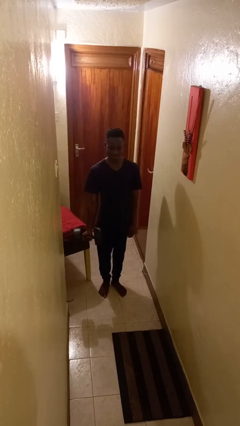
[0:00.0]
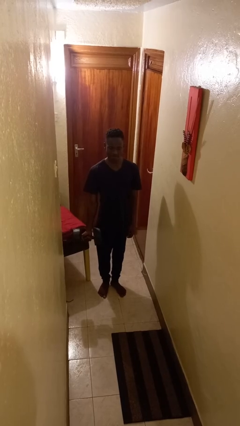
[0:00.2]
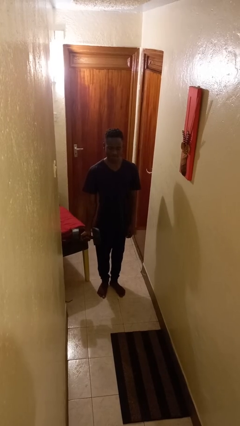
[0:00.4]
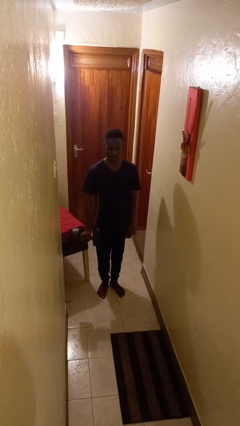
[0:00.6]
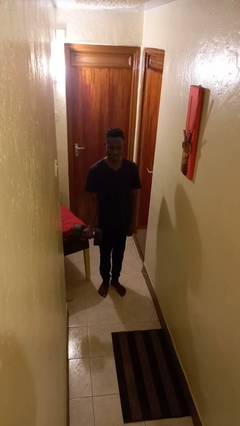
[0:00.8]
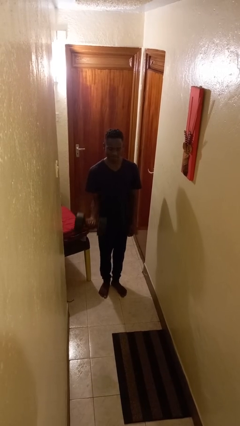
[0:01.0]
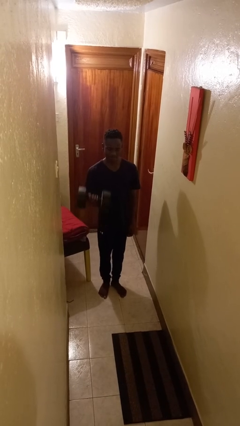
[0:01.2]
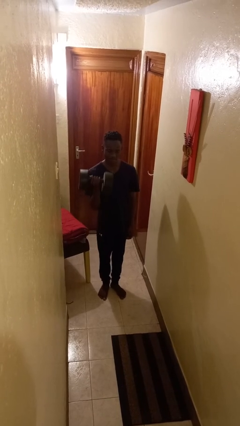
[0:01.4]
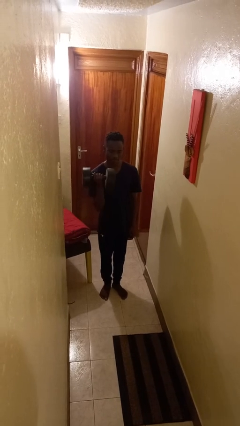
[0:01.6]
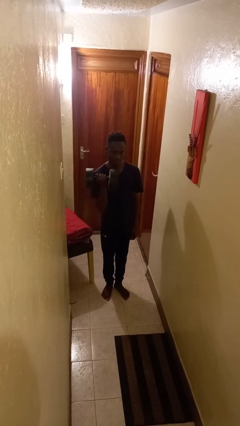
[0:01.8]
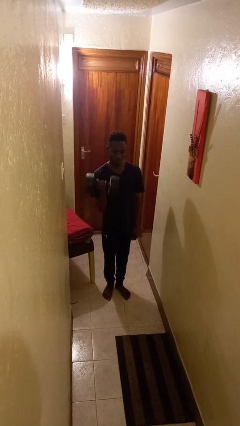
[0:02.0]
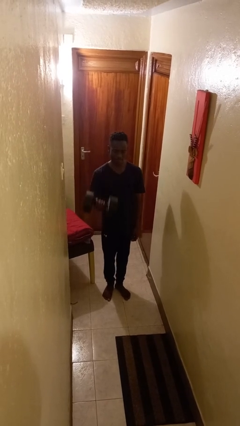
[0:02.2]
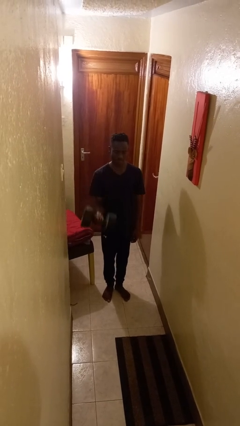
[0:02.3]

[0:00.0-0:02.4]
person lifts dumbbells

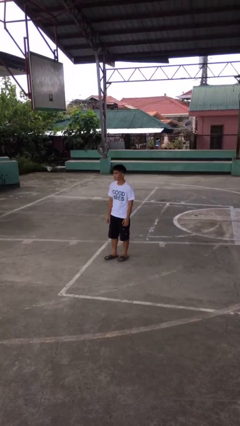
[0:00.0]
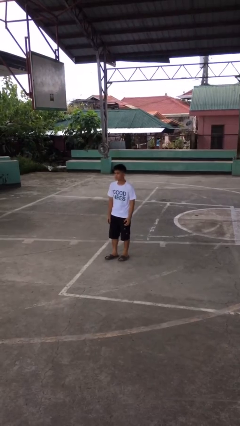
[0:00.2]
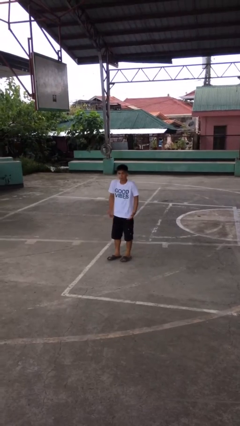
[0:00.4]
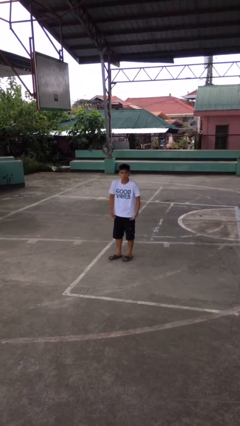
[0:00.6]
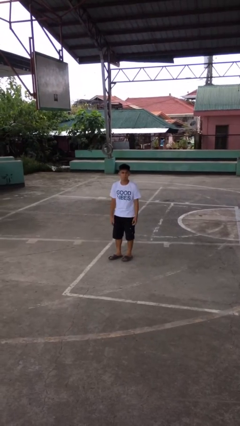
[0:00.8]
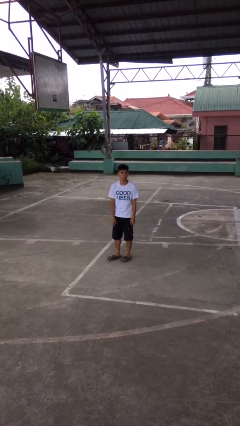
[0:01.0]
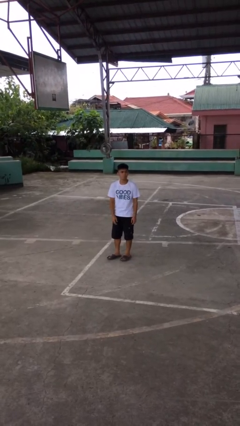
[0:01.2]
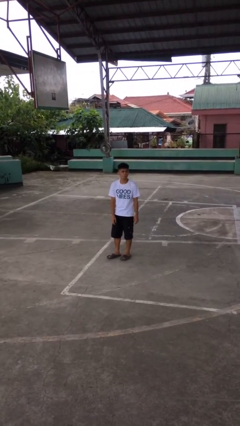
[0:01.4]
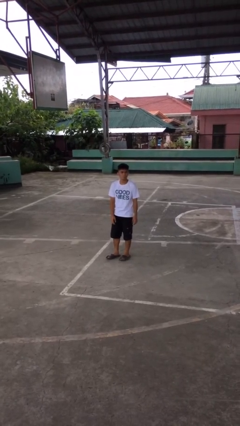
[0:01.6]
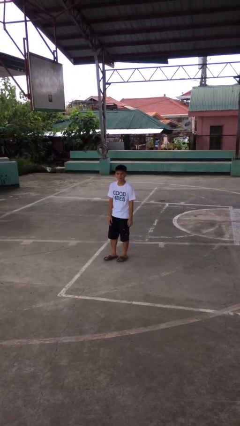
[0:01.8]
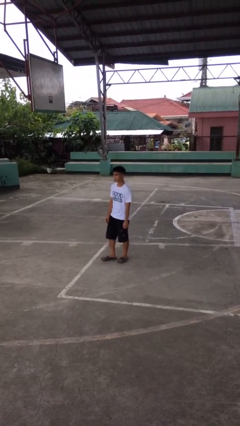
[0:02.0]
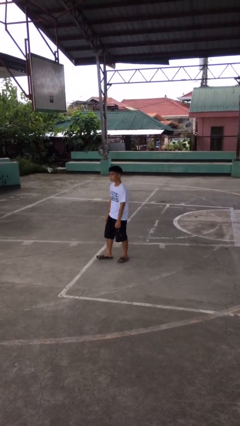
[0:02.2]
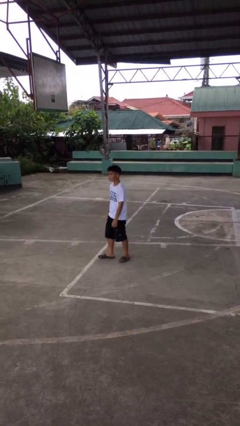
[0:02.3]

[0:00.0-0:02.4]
person shrugs

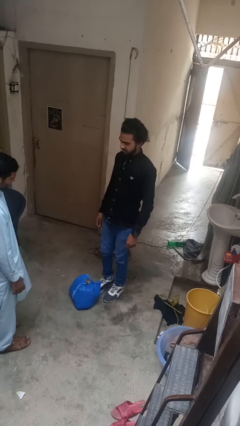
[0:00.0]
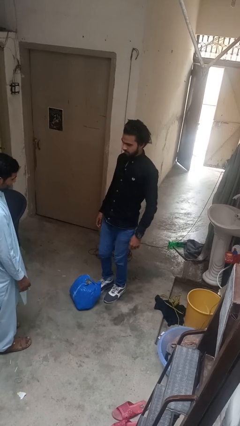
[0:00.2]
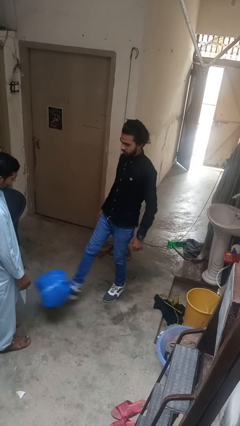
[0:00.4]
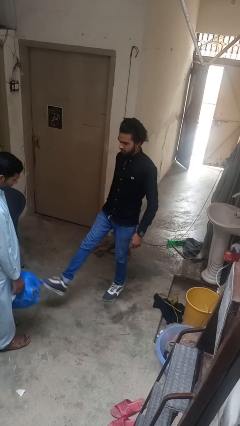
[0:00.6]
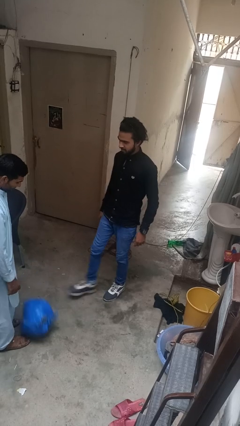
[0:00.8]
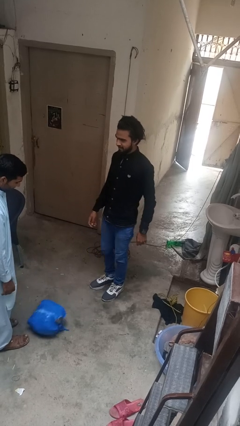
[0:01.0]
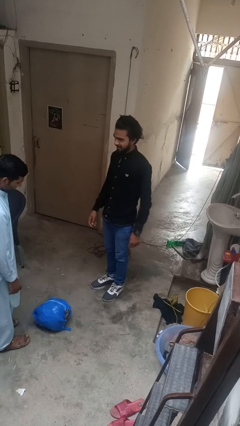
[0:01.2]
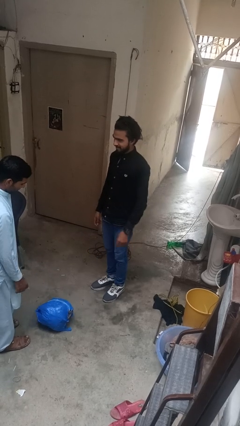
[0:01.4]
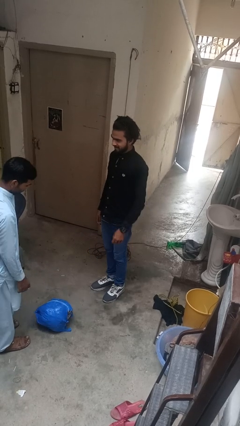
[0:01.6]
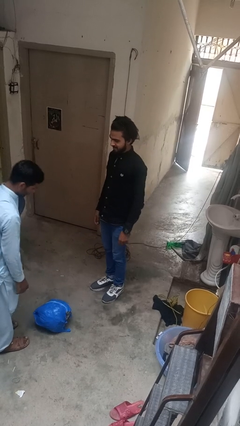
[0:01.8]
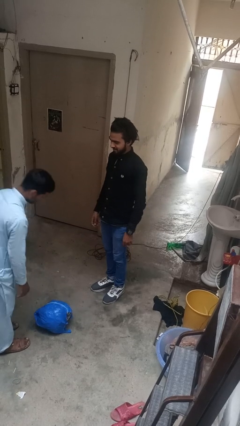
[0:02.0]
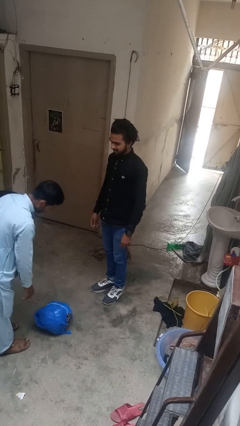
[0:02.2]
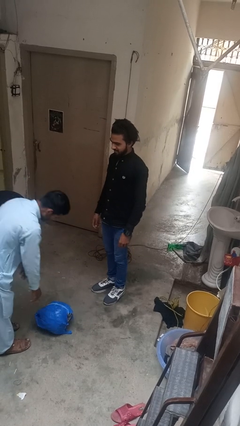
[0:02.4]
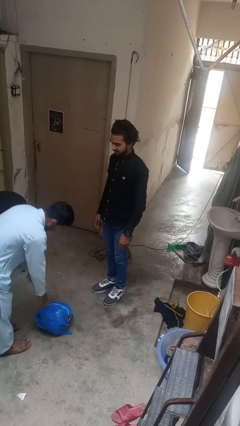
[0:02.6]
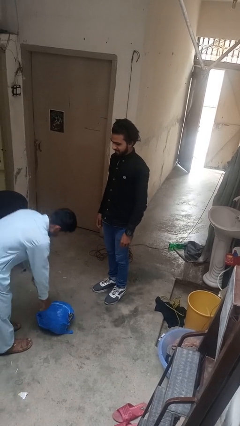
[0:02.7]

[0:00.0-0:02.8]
person kicks object to person

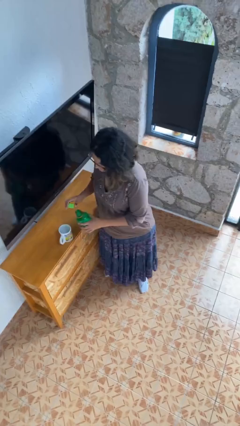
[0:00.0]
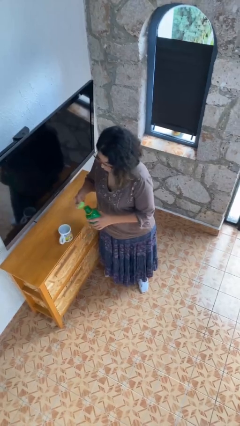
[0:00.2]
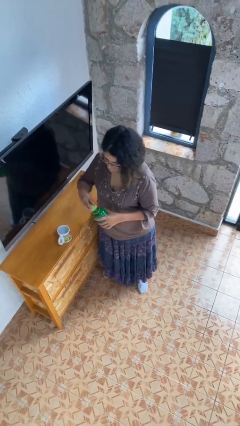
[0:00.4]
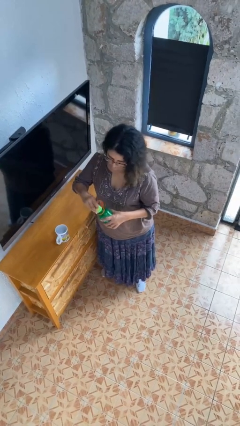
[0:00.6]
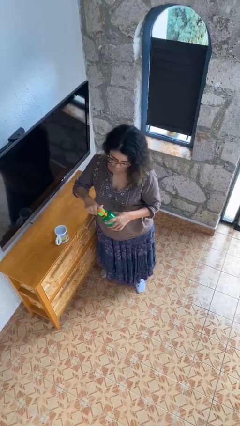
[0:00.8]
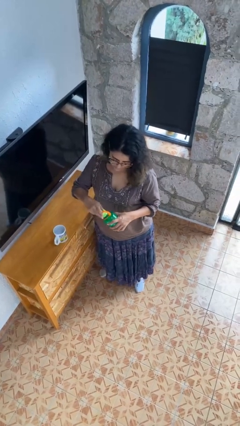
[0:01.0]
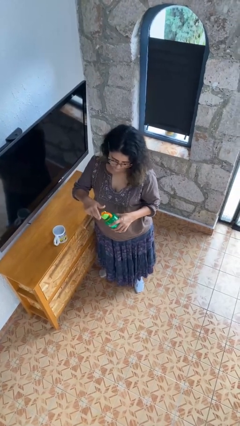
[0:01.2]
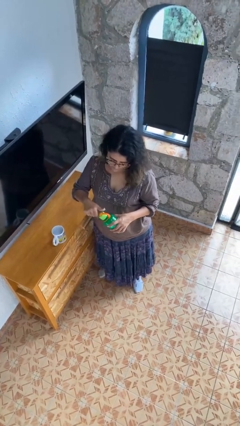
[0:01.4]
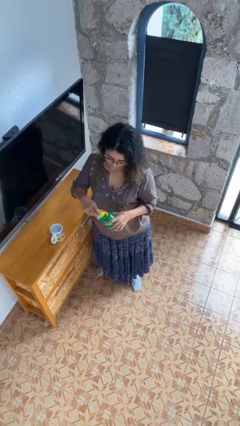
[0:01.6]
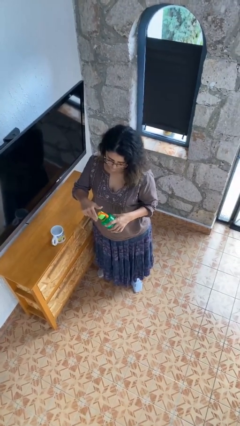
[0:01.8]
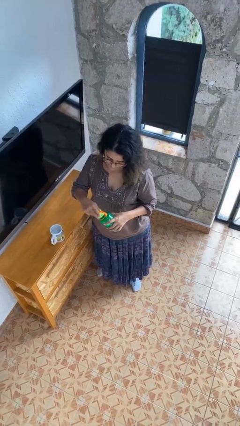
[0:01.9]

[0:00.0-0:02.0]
person screws lid to bottle

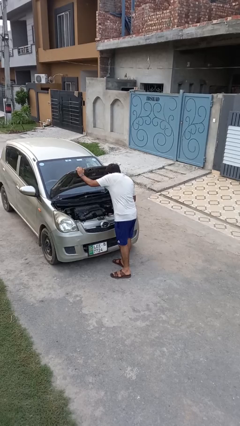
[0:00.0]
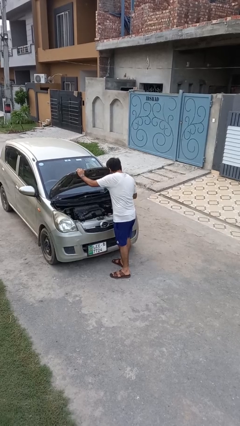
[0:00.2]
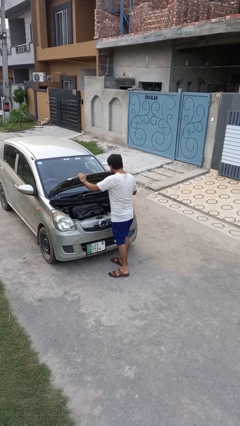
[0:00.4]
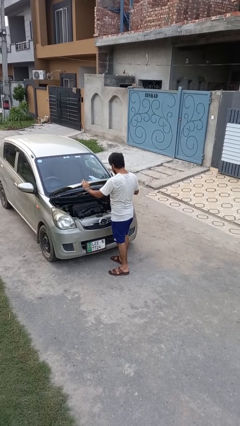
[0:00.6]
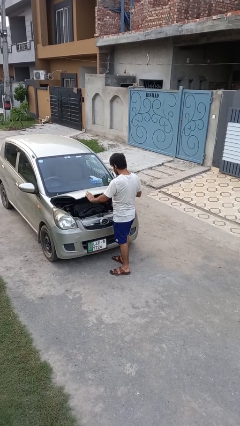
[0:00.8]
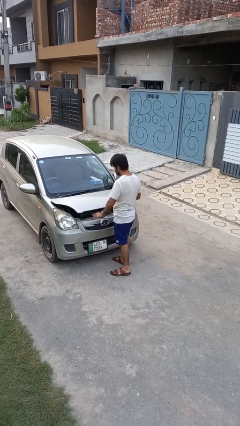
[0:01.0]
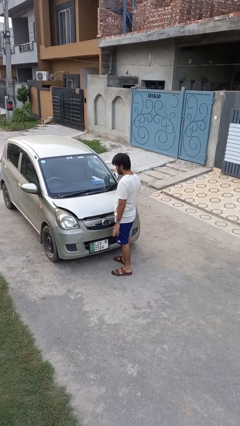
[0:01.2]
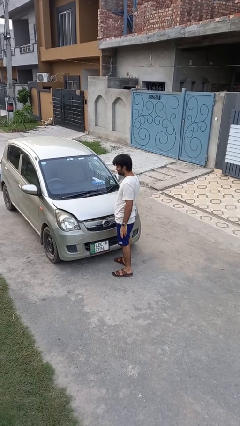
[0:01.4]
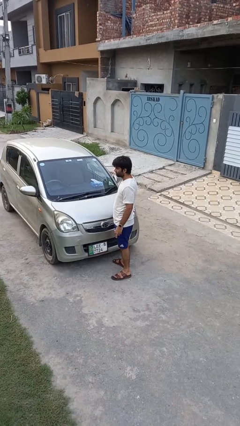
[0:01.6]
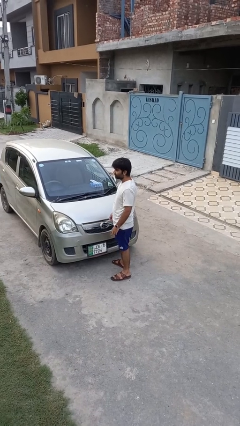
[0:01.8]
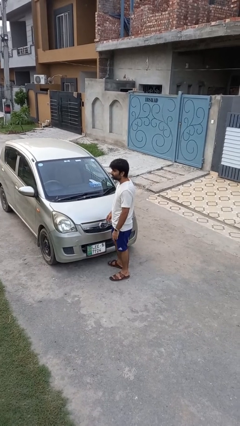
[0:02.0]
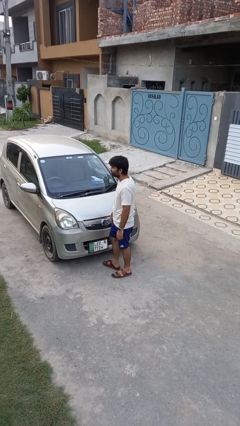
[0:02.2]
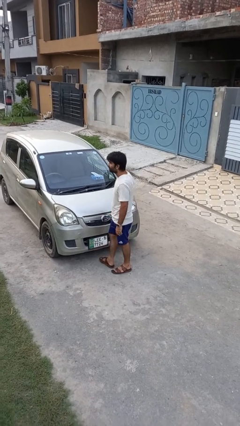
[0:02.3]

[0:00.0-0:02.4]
person closes car hood

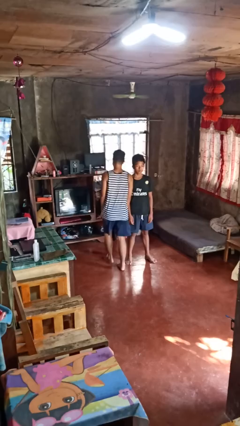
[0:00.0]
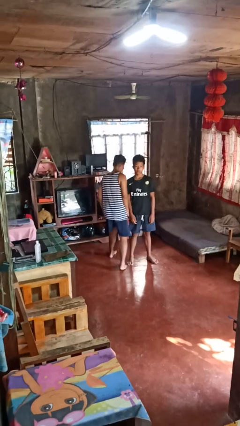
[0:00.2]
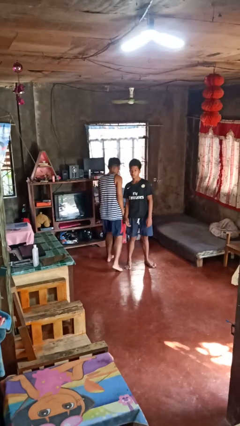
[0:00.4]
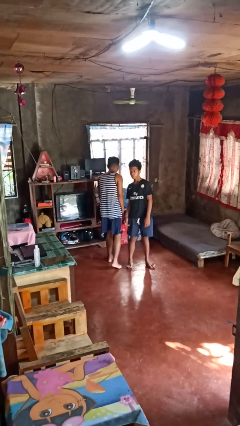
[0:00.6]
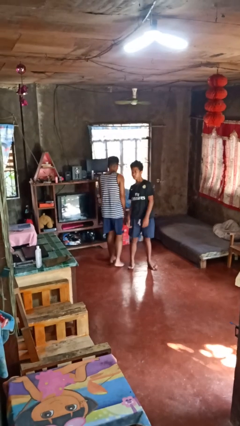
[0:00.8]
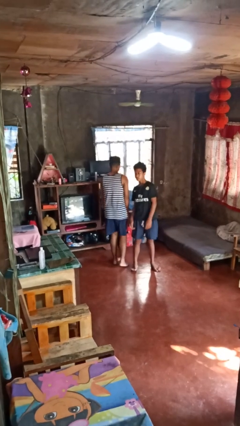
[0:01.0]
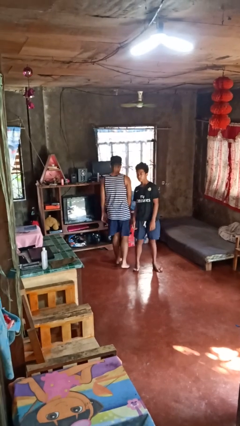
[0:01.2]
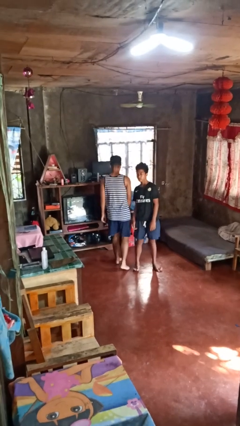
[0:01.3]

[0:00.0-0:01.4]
person bumps into person

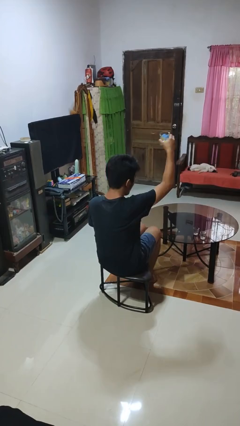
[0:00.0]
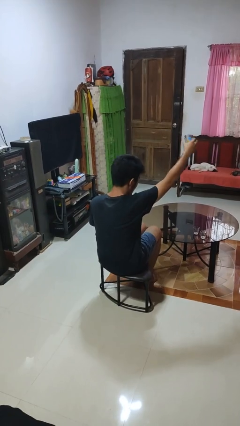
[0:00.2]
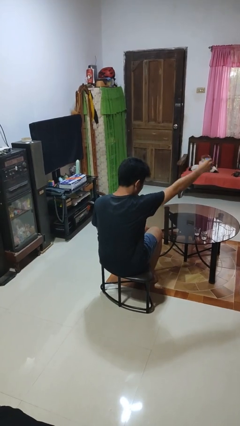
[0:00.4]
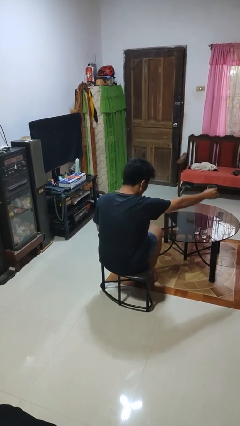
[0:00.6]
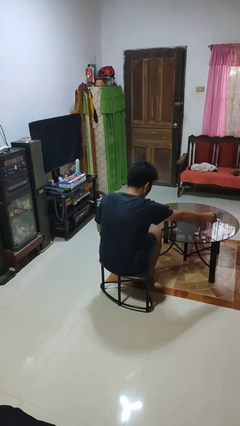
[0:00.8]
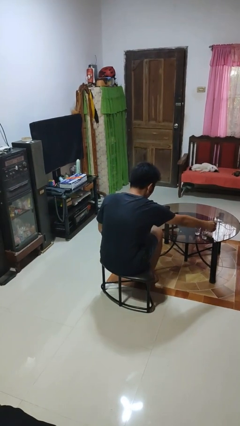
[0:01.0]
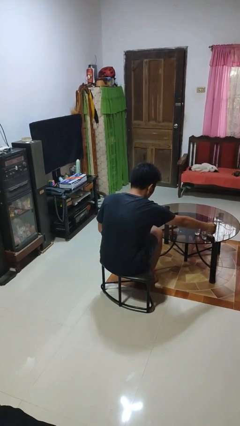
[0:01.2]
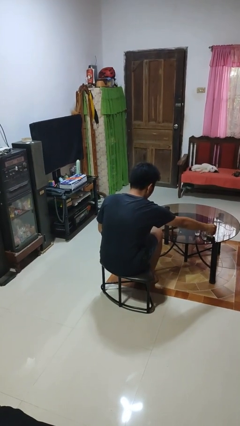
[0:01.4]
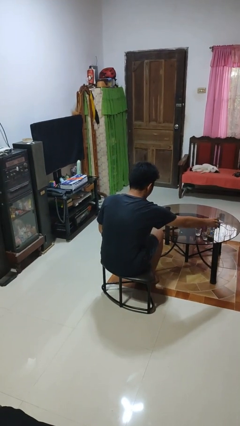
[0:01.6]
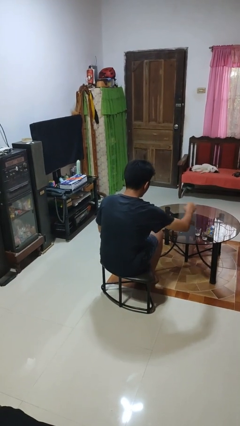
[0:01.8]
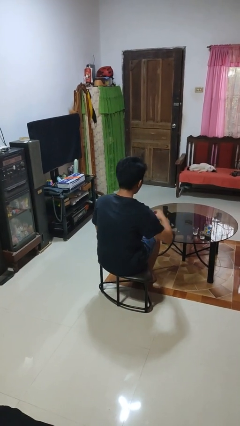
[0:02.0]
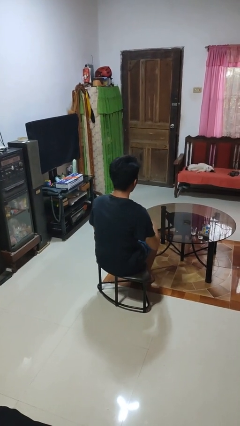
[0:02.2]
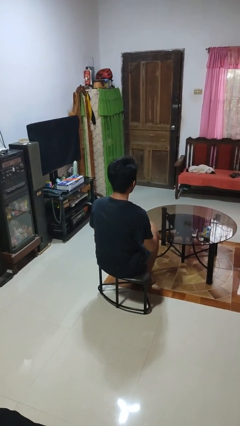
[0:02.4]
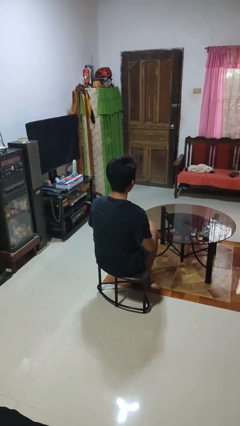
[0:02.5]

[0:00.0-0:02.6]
person puts down object on table

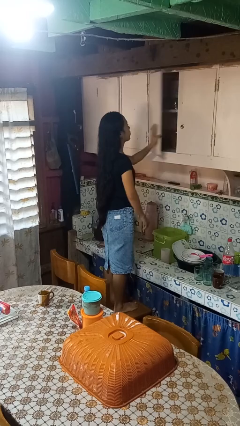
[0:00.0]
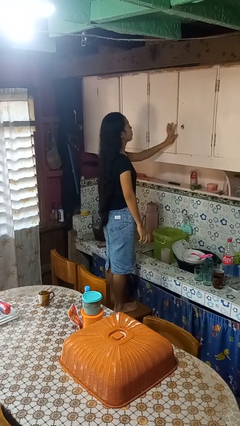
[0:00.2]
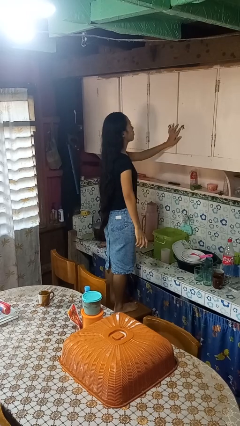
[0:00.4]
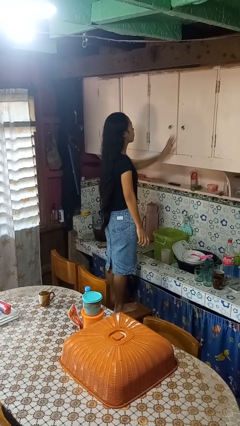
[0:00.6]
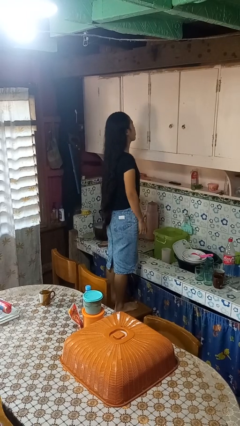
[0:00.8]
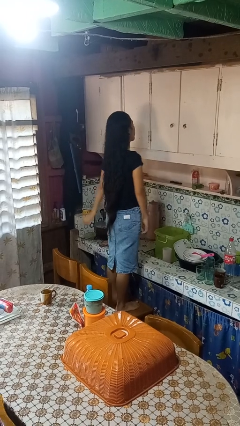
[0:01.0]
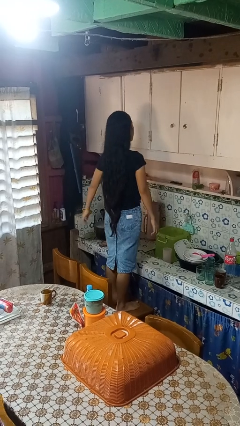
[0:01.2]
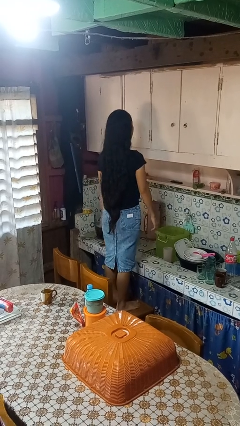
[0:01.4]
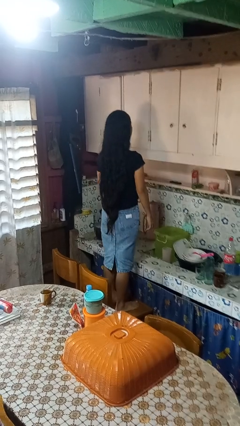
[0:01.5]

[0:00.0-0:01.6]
person closes cabinet
